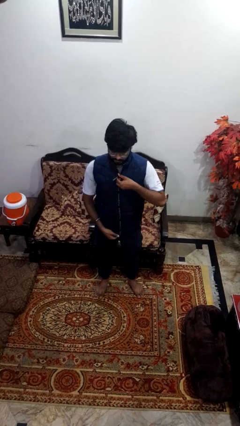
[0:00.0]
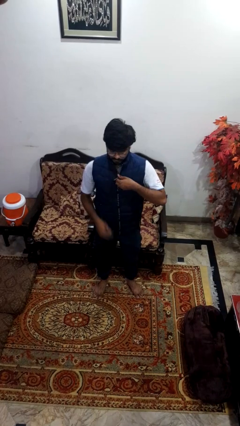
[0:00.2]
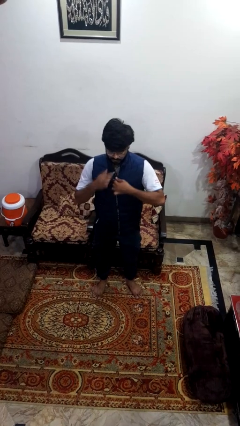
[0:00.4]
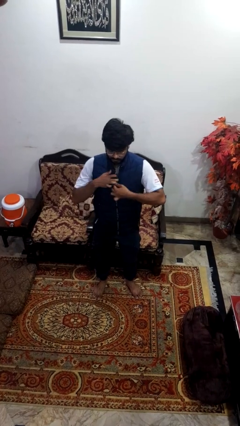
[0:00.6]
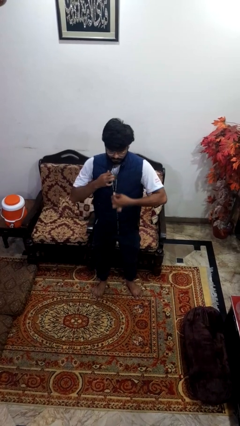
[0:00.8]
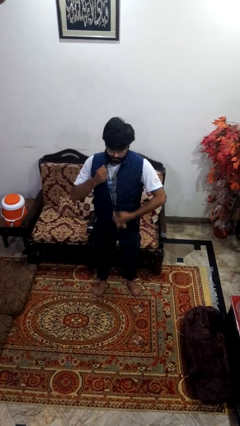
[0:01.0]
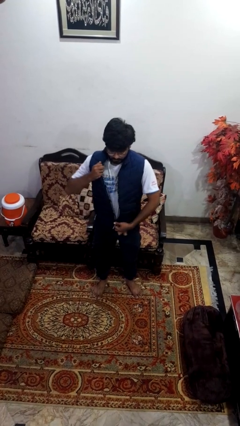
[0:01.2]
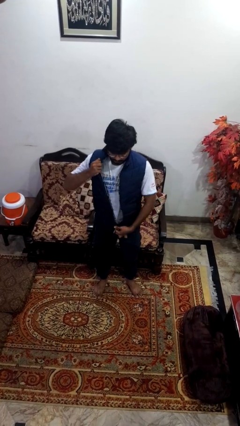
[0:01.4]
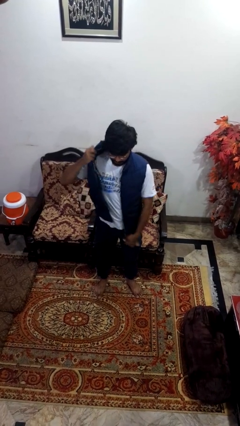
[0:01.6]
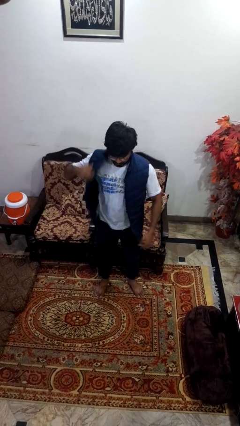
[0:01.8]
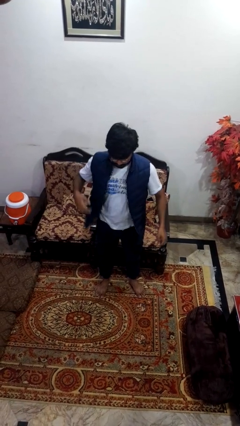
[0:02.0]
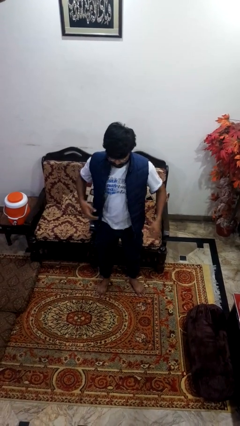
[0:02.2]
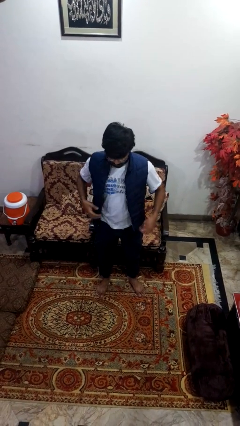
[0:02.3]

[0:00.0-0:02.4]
person unzips jacket

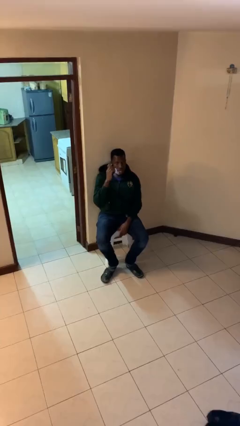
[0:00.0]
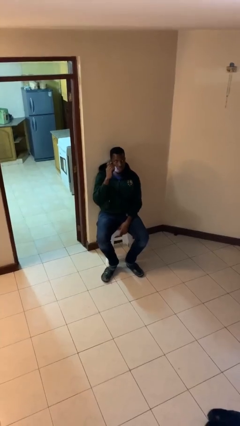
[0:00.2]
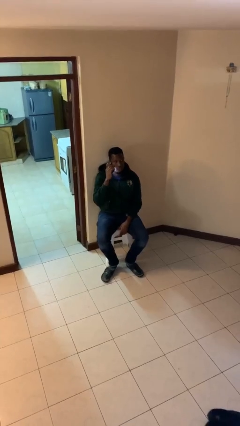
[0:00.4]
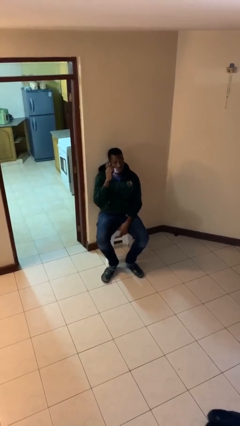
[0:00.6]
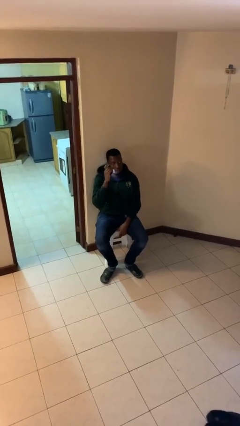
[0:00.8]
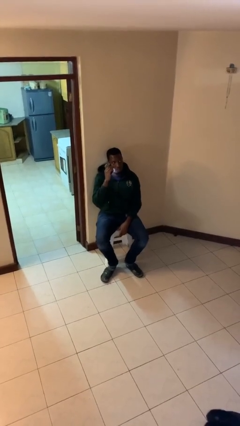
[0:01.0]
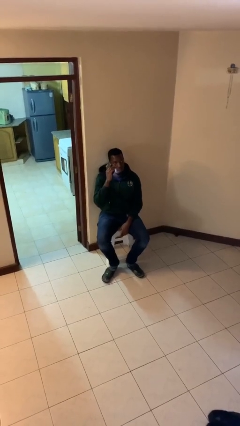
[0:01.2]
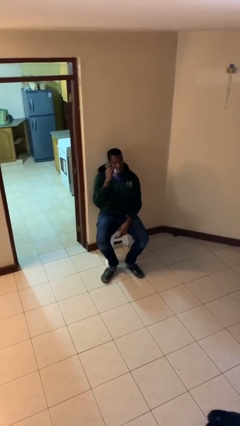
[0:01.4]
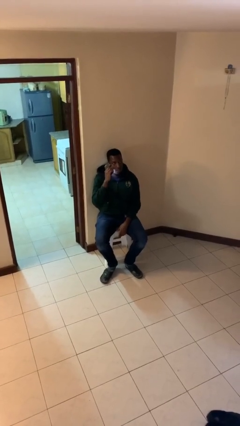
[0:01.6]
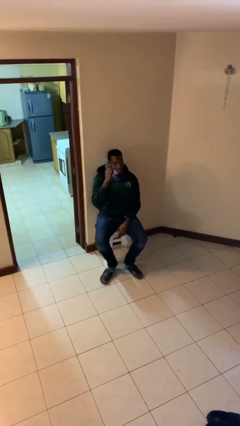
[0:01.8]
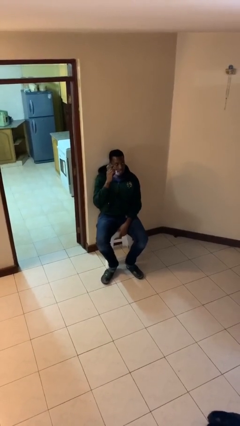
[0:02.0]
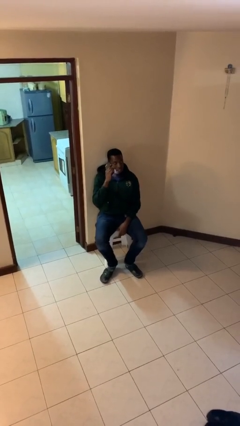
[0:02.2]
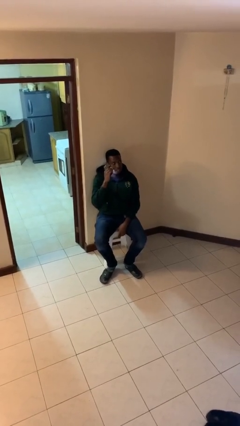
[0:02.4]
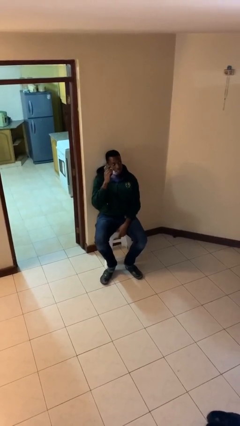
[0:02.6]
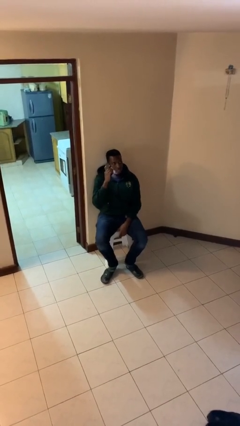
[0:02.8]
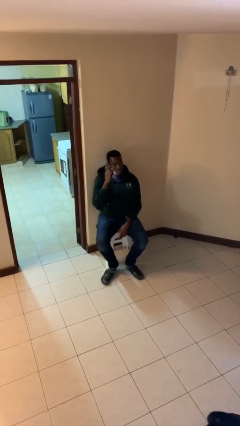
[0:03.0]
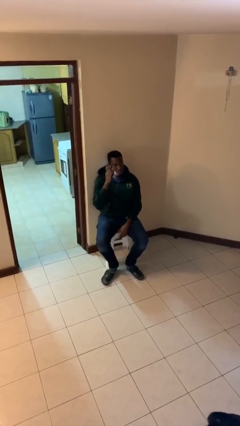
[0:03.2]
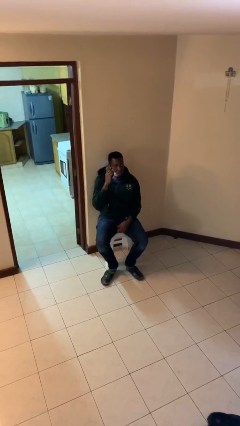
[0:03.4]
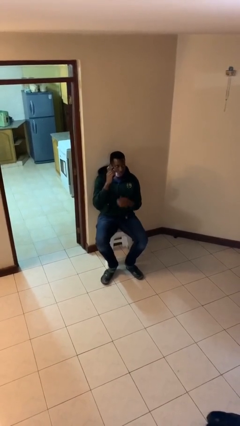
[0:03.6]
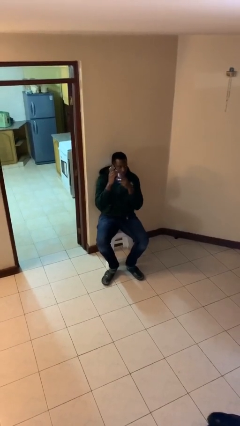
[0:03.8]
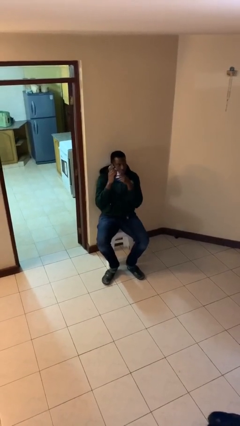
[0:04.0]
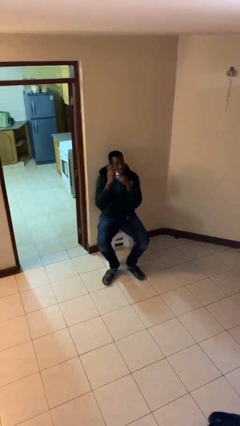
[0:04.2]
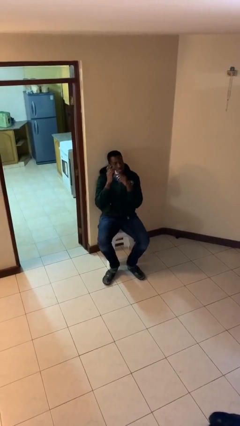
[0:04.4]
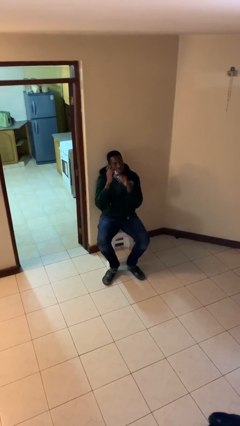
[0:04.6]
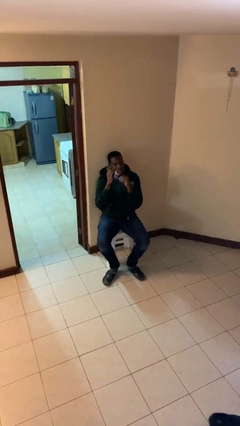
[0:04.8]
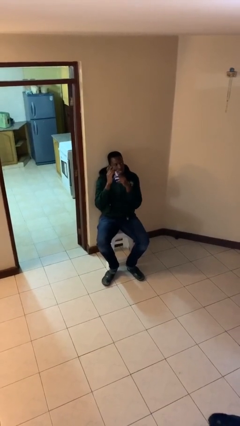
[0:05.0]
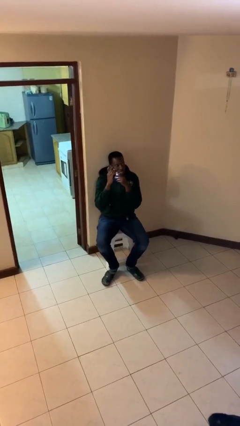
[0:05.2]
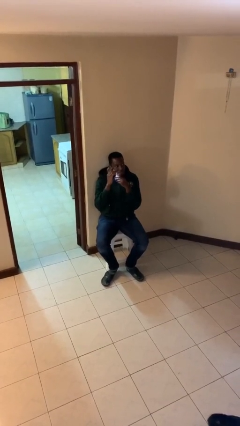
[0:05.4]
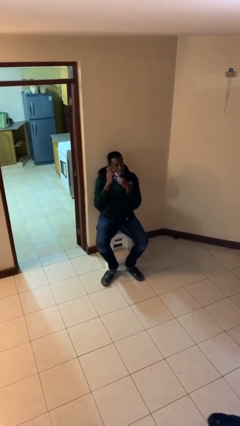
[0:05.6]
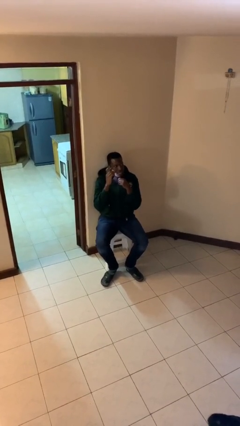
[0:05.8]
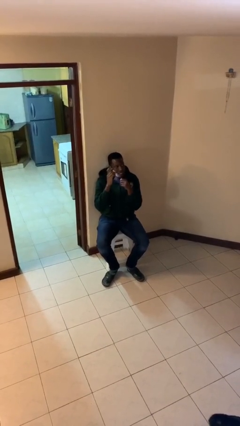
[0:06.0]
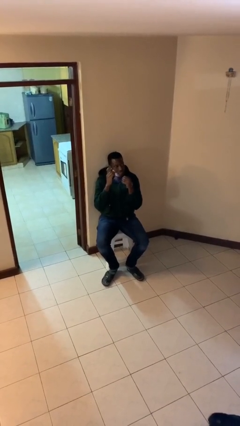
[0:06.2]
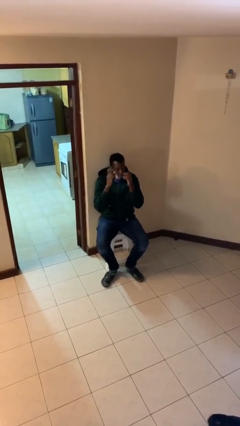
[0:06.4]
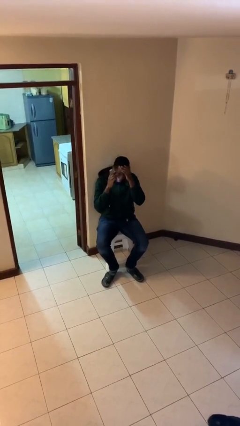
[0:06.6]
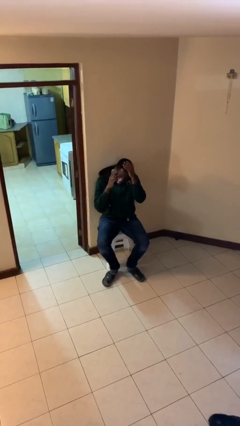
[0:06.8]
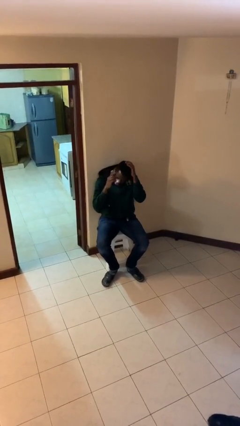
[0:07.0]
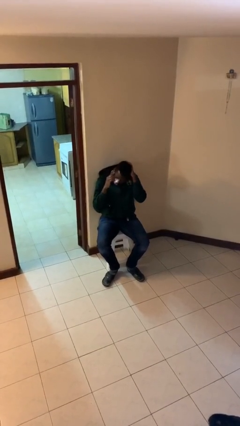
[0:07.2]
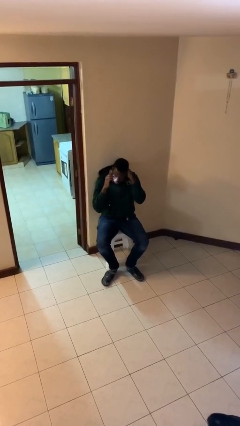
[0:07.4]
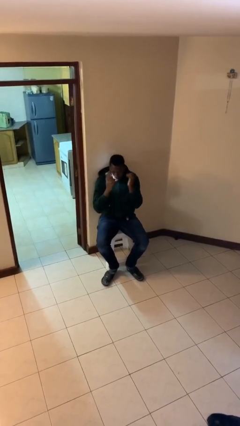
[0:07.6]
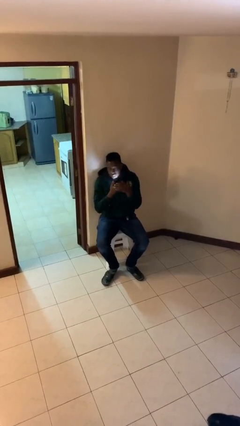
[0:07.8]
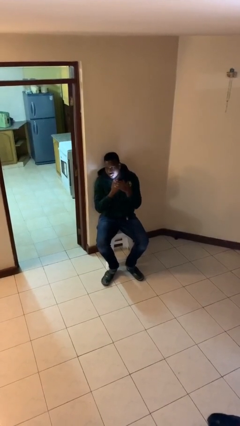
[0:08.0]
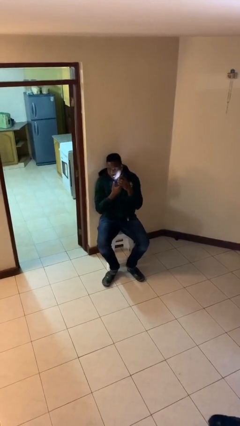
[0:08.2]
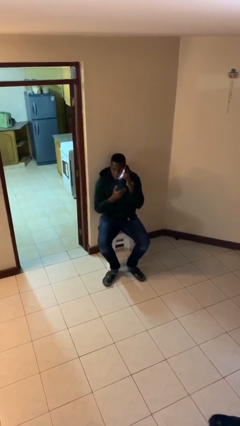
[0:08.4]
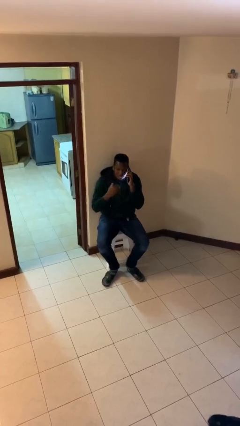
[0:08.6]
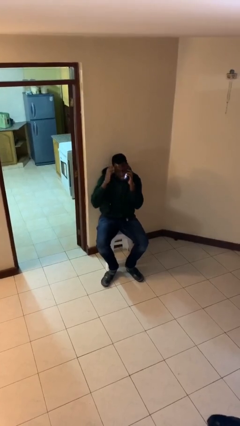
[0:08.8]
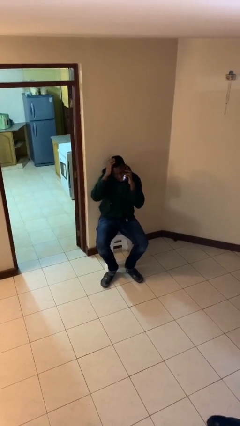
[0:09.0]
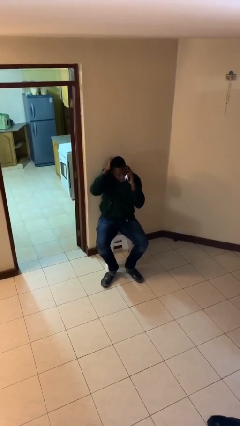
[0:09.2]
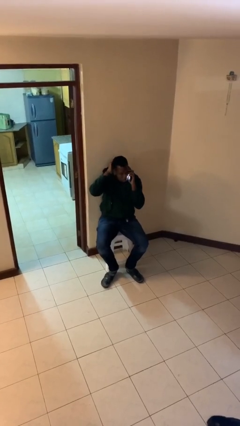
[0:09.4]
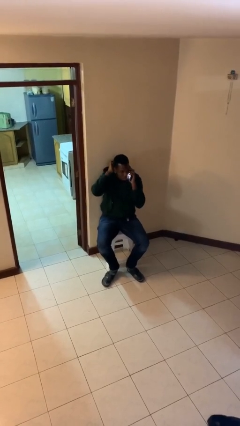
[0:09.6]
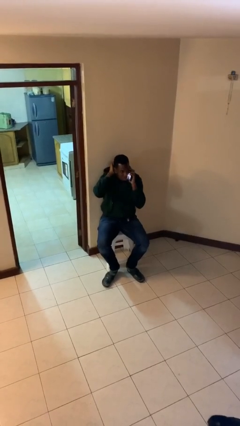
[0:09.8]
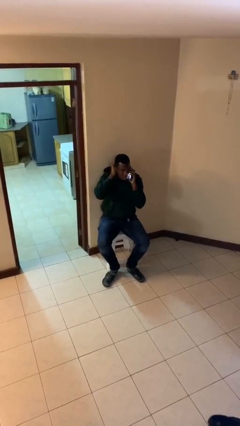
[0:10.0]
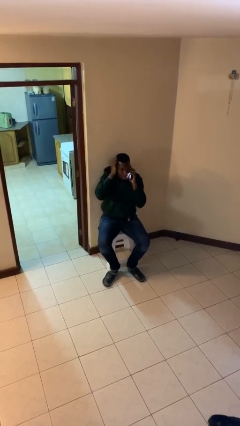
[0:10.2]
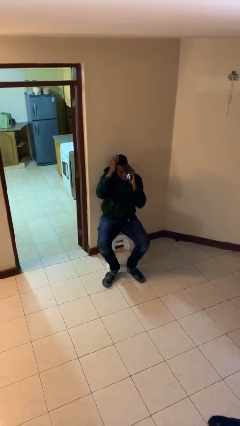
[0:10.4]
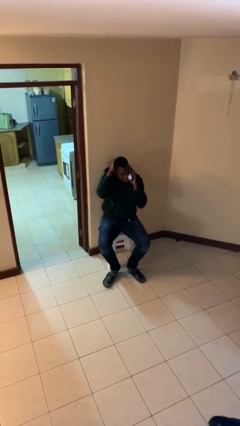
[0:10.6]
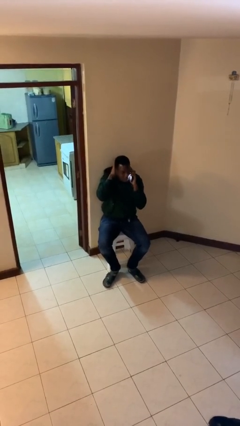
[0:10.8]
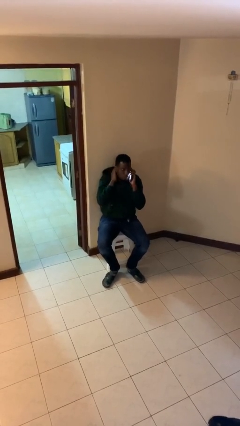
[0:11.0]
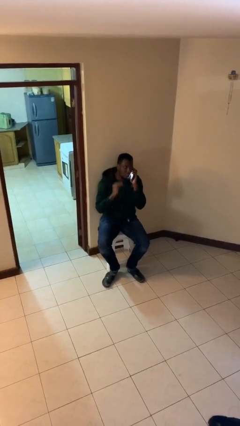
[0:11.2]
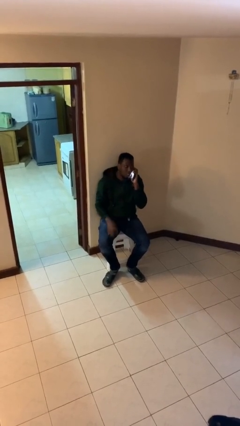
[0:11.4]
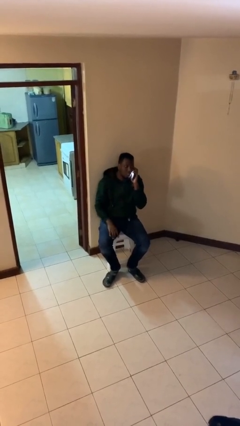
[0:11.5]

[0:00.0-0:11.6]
person talks on phone

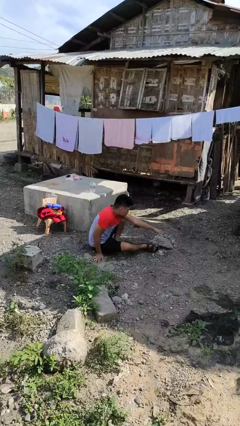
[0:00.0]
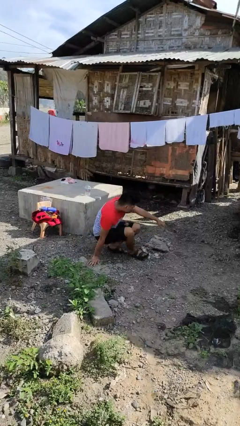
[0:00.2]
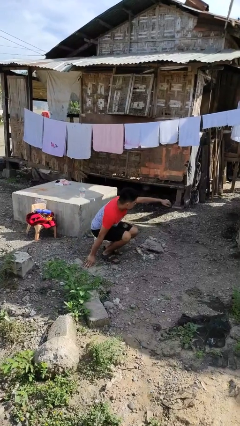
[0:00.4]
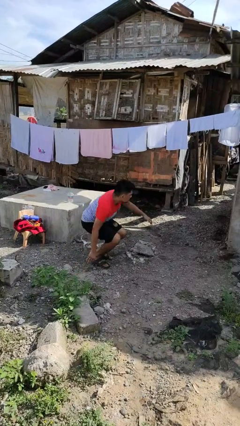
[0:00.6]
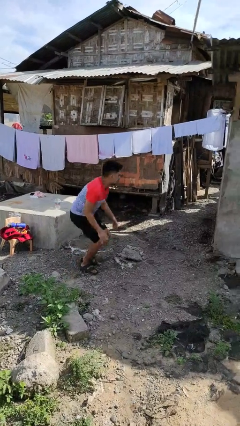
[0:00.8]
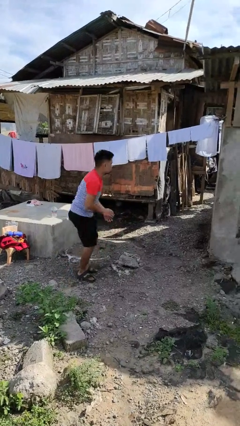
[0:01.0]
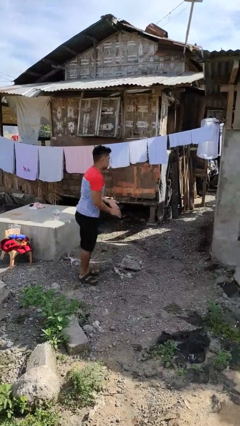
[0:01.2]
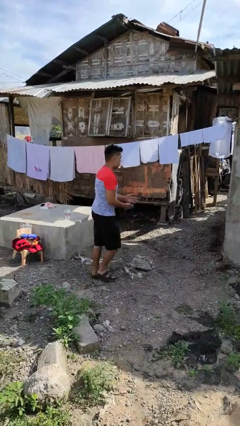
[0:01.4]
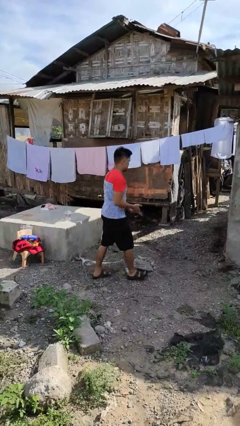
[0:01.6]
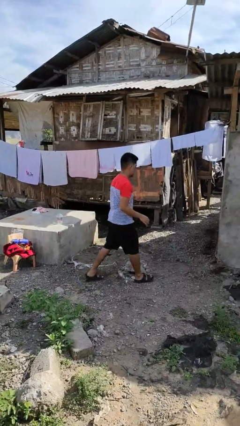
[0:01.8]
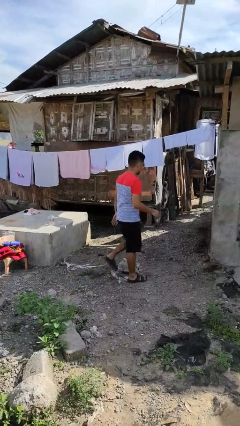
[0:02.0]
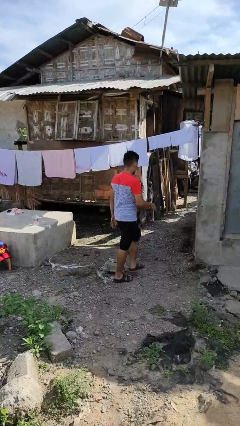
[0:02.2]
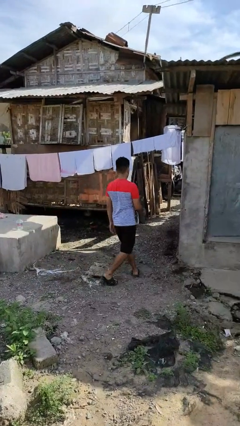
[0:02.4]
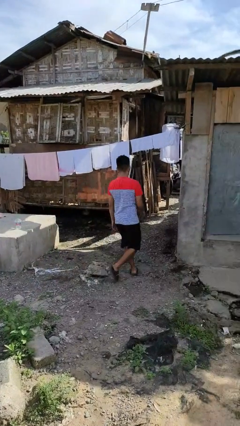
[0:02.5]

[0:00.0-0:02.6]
person stands up from floor

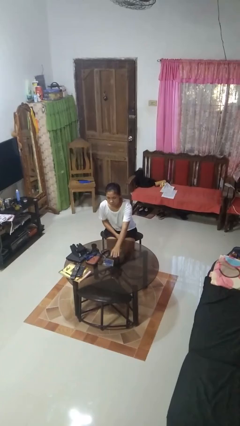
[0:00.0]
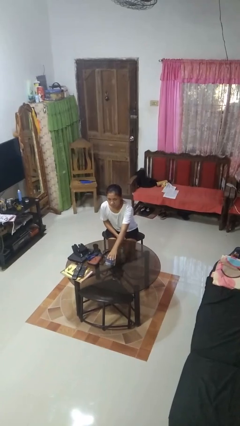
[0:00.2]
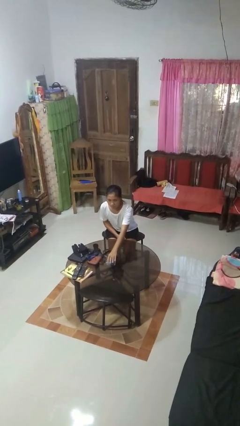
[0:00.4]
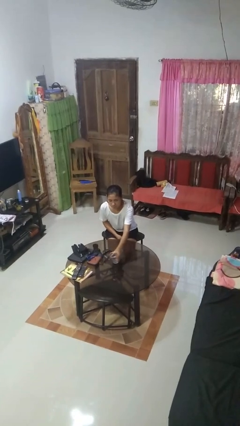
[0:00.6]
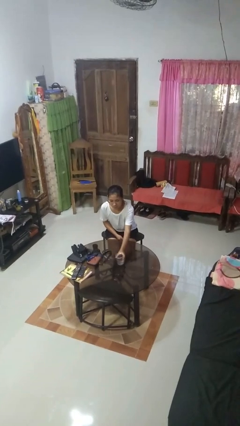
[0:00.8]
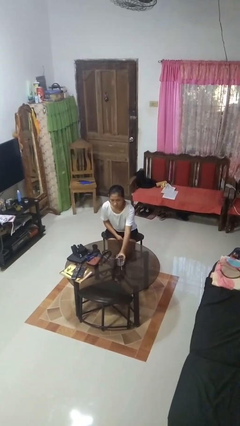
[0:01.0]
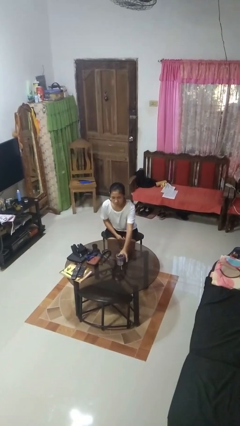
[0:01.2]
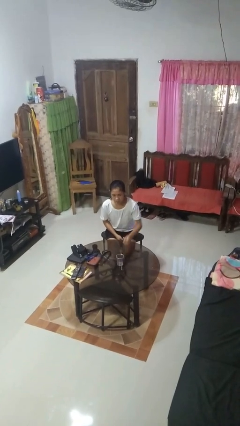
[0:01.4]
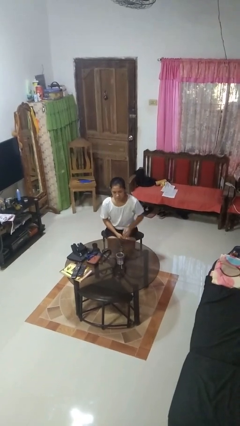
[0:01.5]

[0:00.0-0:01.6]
person sets upright glass
